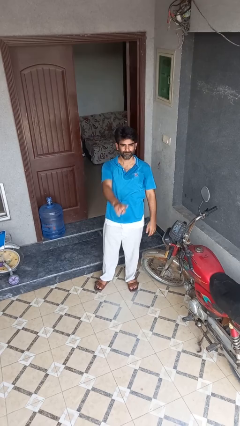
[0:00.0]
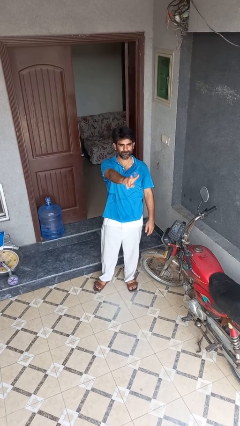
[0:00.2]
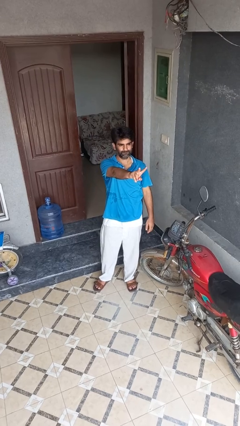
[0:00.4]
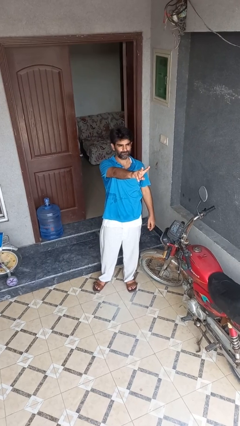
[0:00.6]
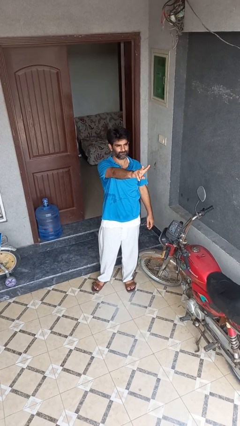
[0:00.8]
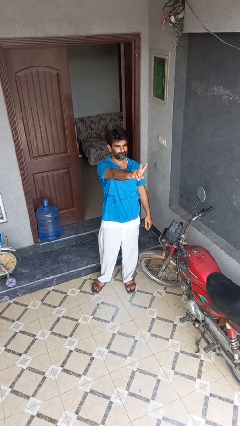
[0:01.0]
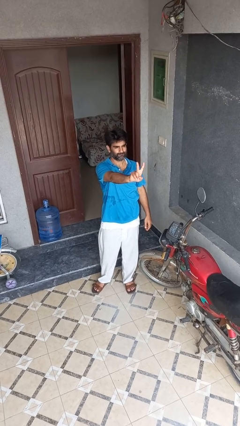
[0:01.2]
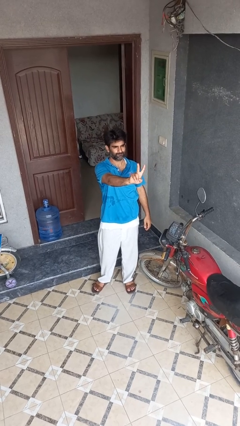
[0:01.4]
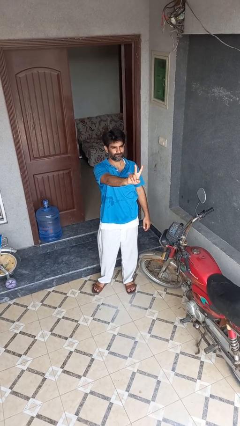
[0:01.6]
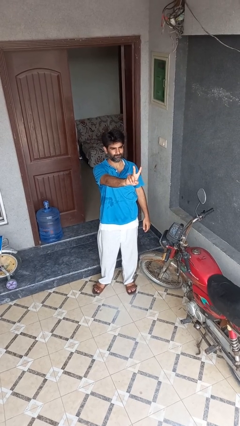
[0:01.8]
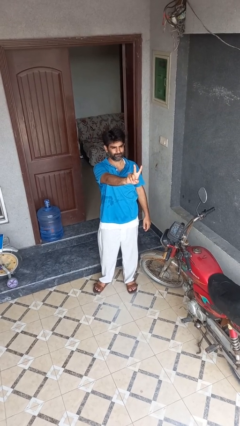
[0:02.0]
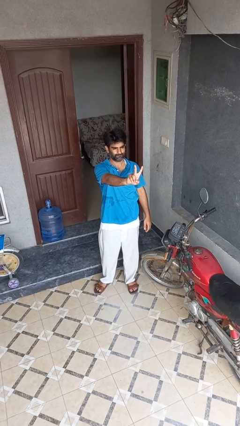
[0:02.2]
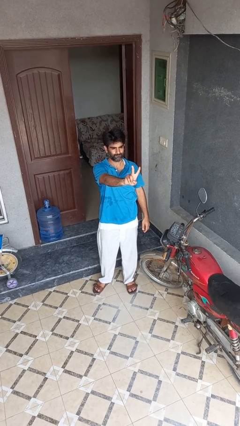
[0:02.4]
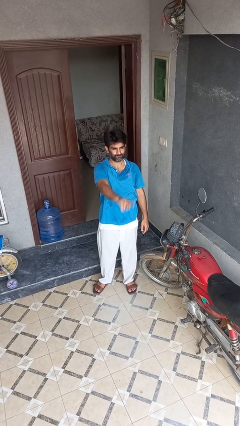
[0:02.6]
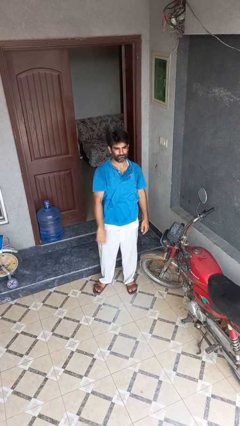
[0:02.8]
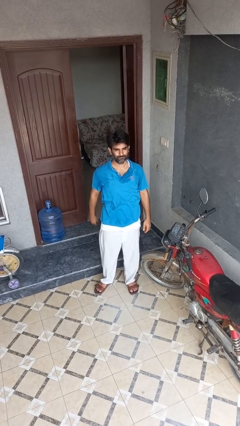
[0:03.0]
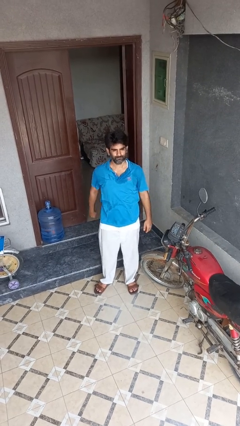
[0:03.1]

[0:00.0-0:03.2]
person gestures peace

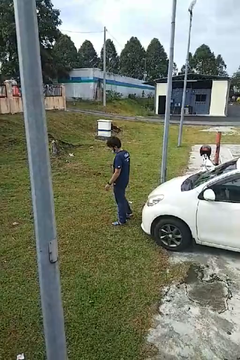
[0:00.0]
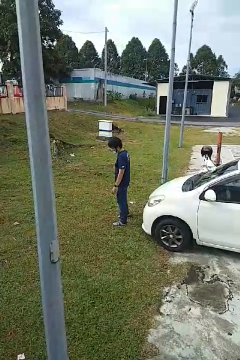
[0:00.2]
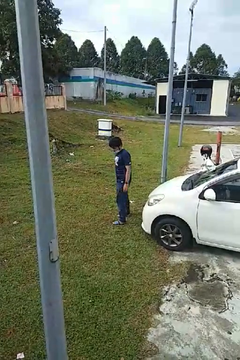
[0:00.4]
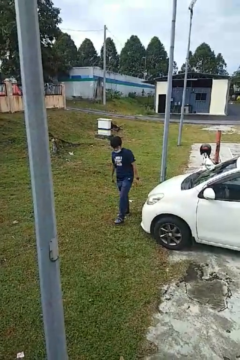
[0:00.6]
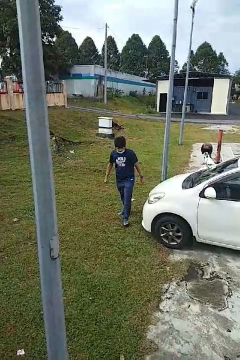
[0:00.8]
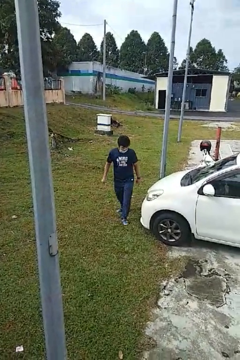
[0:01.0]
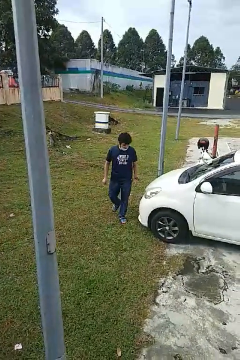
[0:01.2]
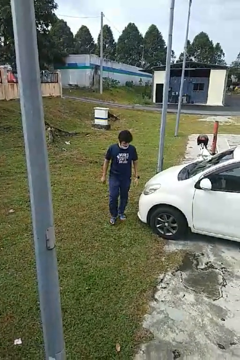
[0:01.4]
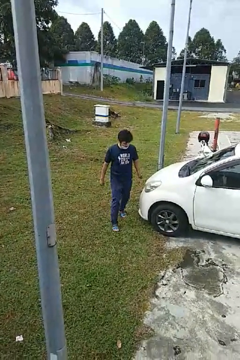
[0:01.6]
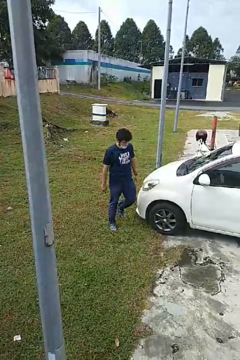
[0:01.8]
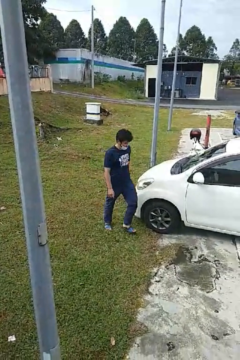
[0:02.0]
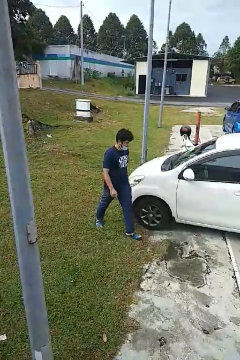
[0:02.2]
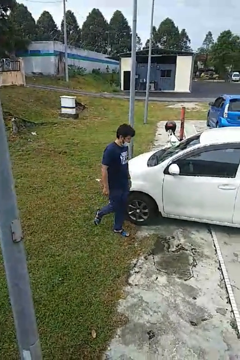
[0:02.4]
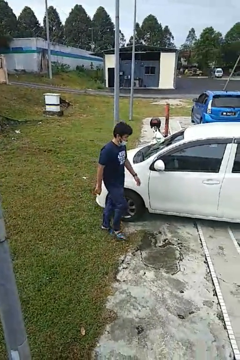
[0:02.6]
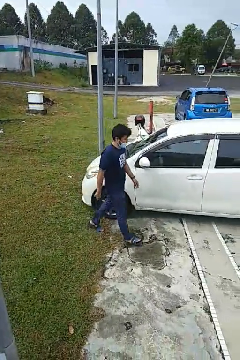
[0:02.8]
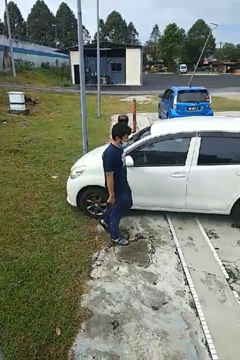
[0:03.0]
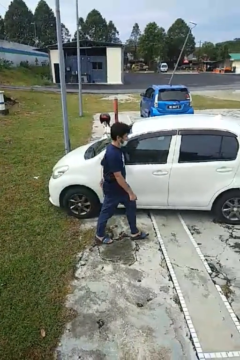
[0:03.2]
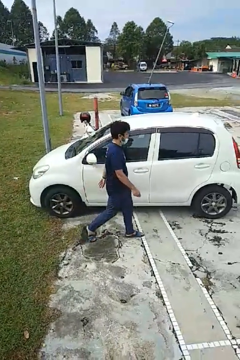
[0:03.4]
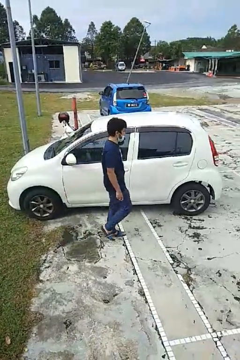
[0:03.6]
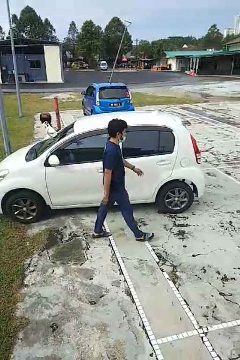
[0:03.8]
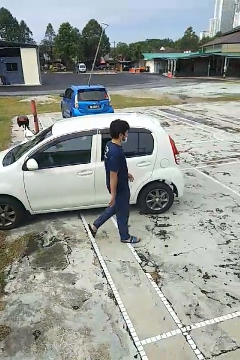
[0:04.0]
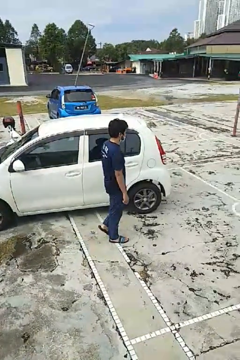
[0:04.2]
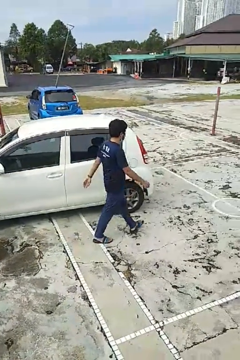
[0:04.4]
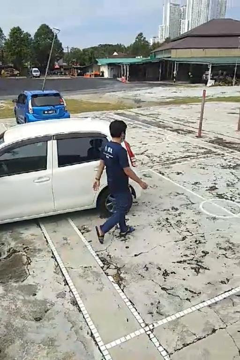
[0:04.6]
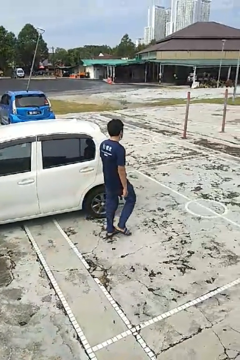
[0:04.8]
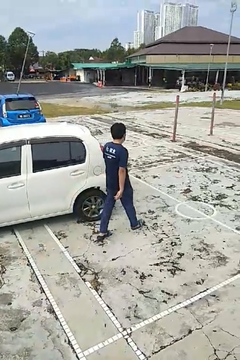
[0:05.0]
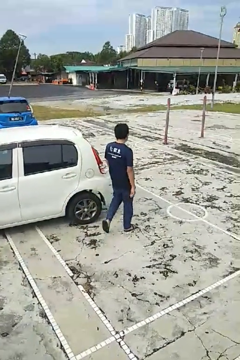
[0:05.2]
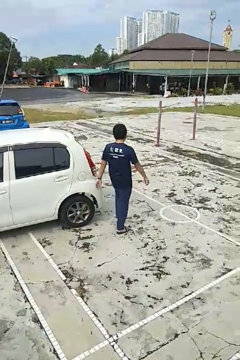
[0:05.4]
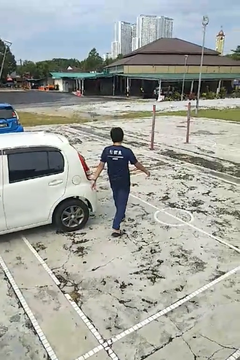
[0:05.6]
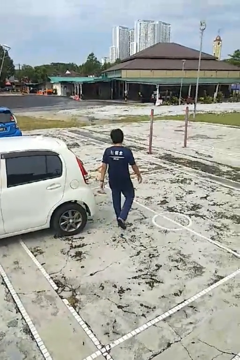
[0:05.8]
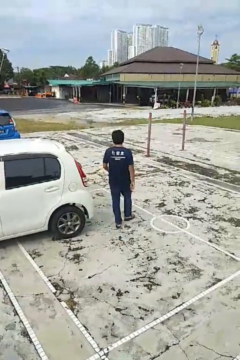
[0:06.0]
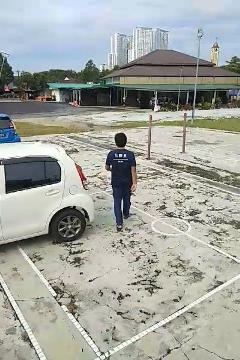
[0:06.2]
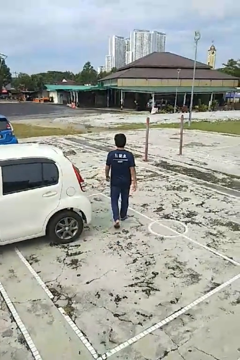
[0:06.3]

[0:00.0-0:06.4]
person walks around car

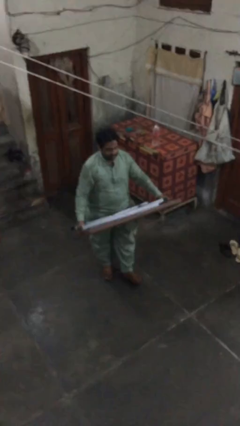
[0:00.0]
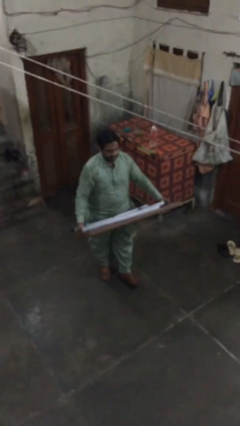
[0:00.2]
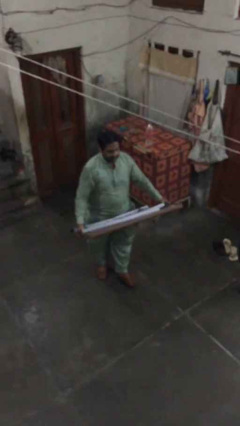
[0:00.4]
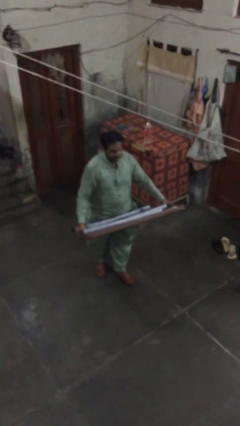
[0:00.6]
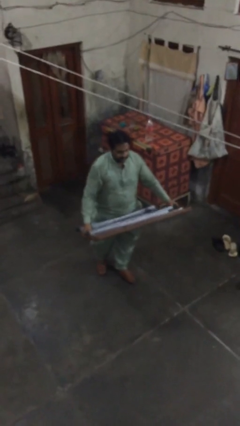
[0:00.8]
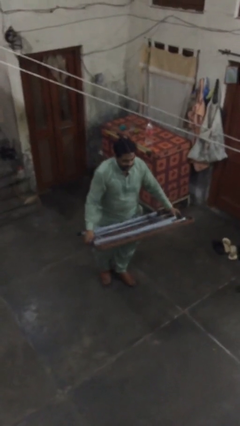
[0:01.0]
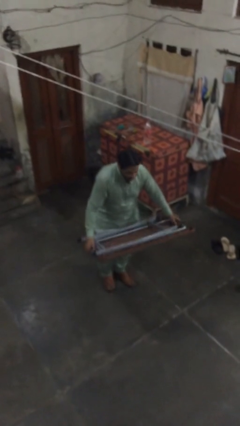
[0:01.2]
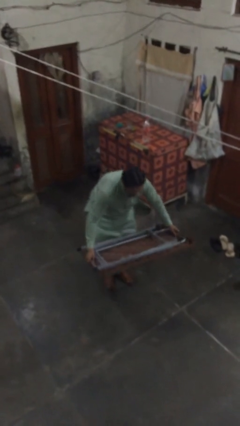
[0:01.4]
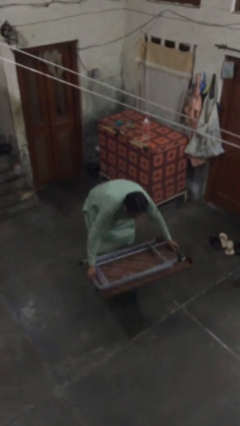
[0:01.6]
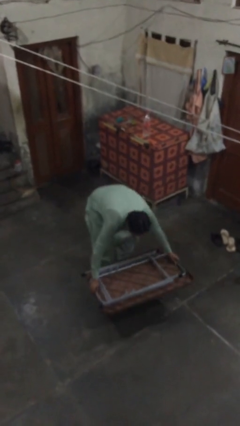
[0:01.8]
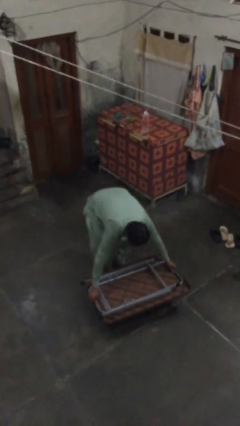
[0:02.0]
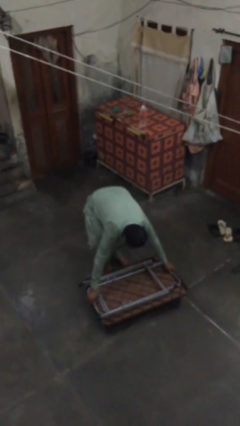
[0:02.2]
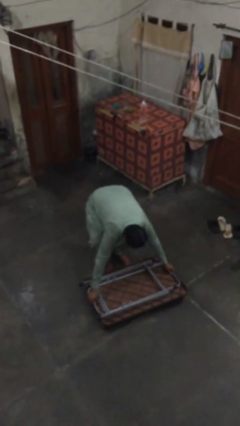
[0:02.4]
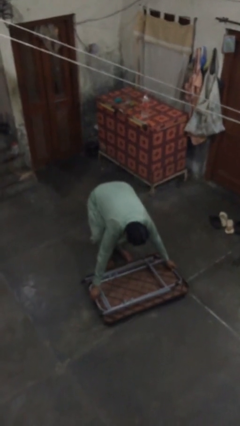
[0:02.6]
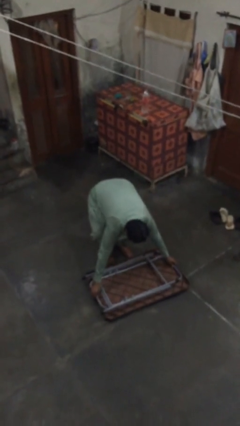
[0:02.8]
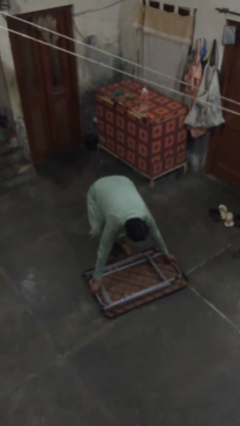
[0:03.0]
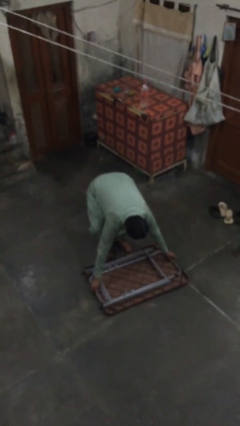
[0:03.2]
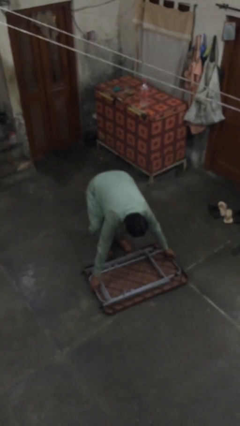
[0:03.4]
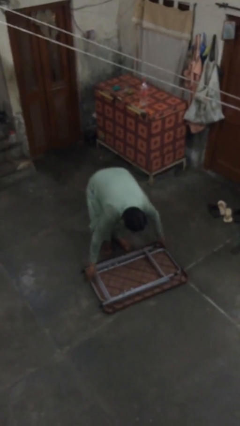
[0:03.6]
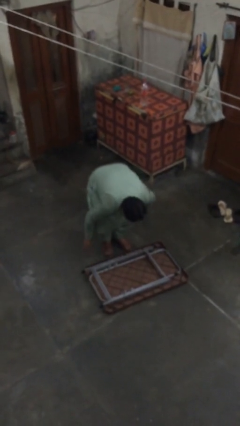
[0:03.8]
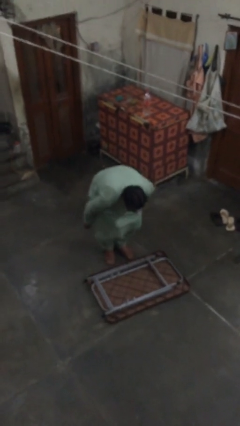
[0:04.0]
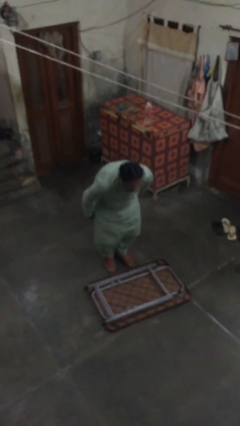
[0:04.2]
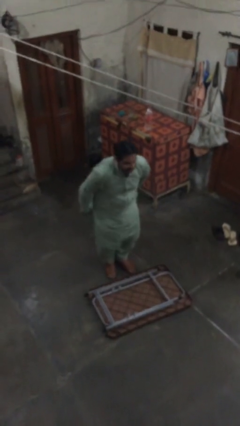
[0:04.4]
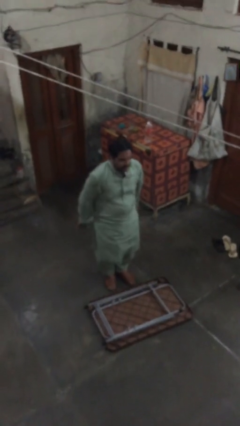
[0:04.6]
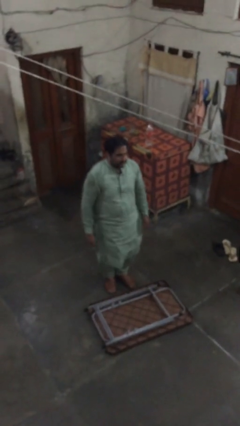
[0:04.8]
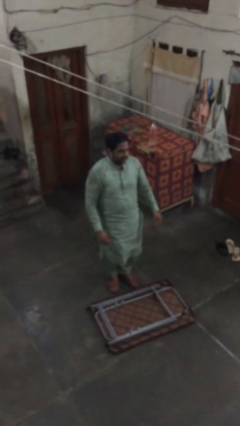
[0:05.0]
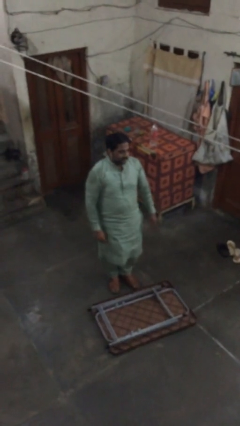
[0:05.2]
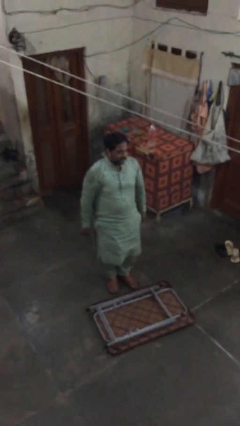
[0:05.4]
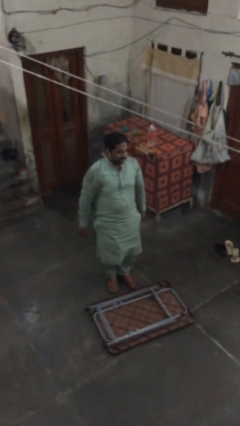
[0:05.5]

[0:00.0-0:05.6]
person puts down object on floor

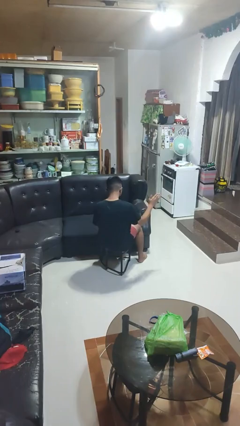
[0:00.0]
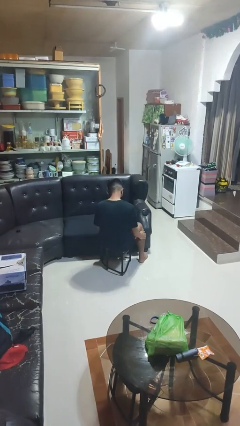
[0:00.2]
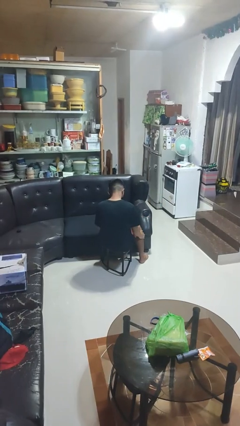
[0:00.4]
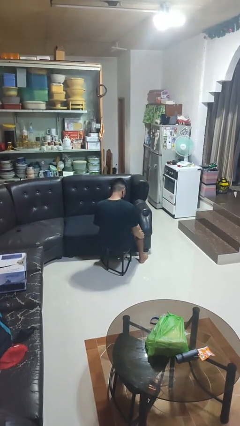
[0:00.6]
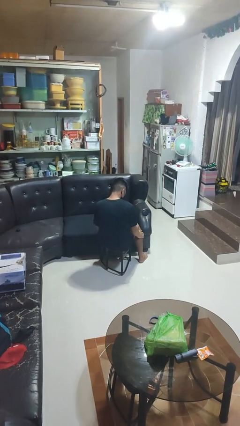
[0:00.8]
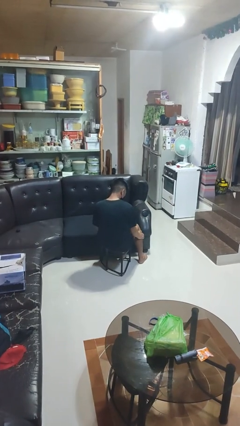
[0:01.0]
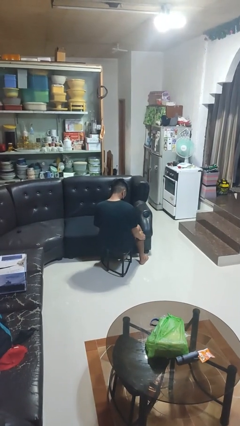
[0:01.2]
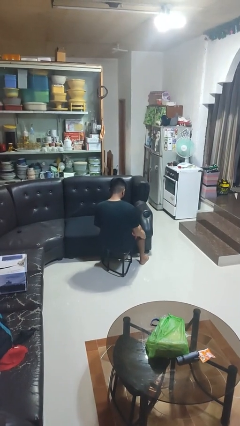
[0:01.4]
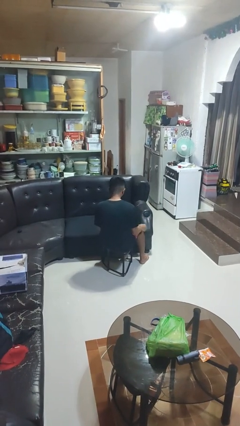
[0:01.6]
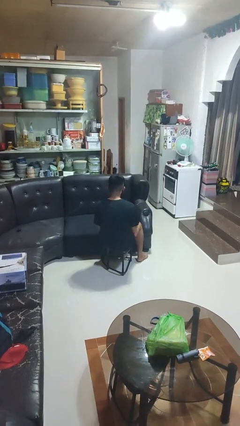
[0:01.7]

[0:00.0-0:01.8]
person swats bug

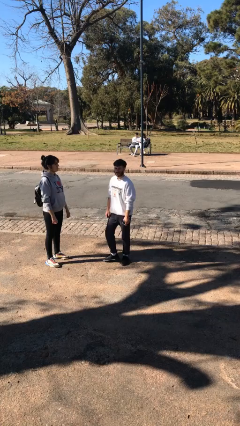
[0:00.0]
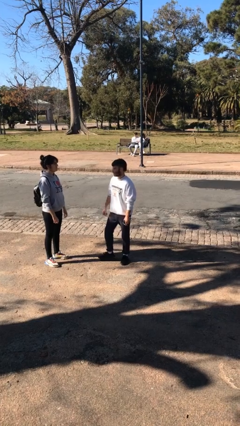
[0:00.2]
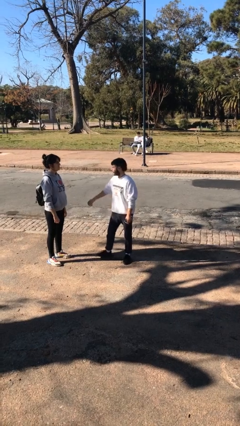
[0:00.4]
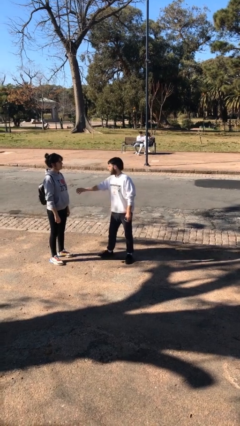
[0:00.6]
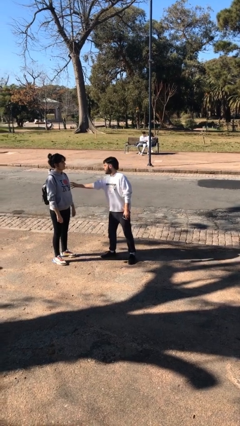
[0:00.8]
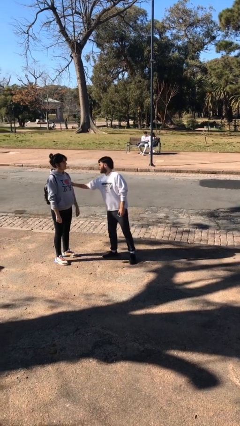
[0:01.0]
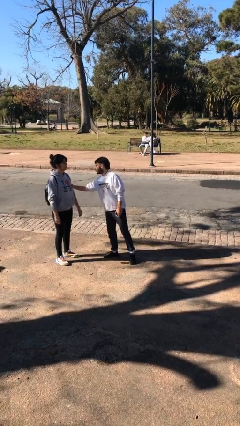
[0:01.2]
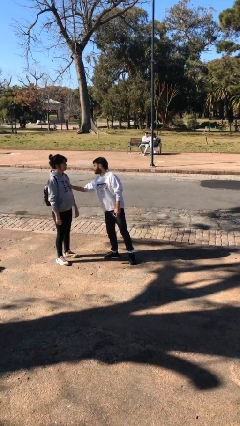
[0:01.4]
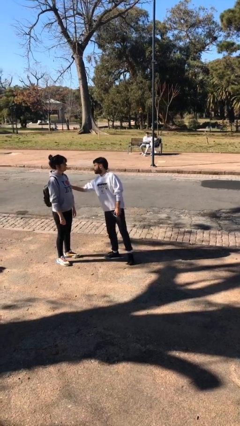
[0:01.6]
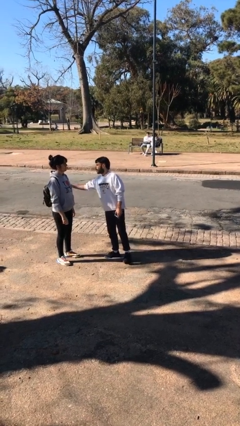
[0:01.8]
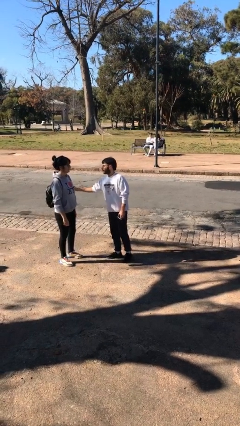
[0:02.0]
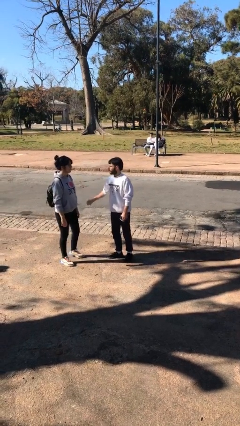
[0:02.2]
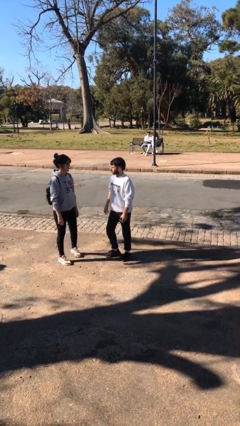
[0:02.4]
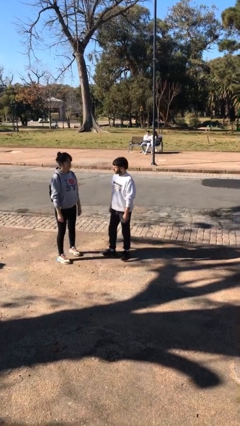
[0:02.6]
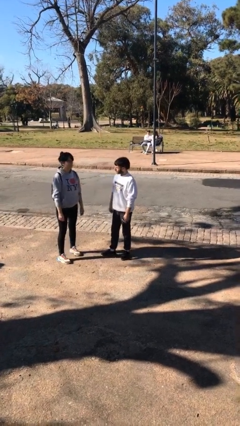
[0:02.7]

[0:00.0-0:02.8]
person grabs person by bicep
